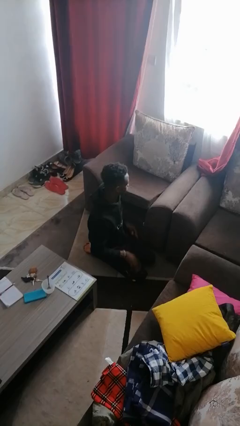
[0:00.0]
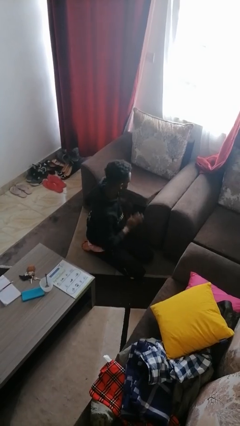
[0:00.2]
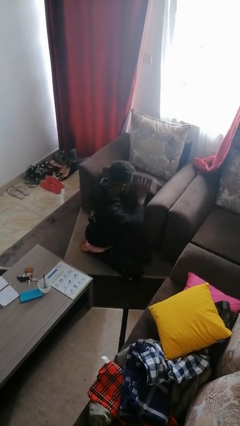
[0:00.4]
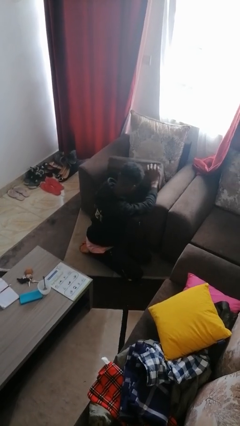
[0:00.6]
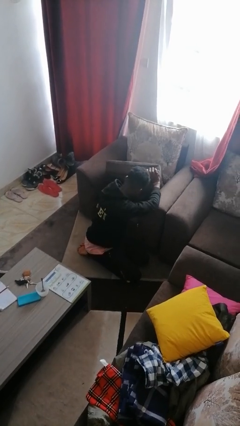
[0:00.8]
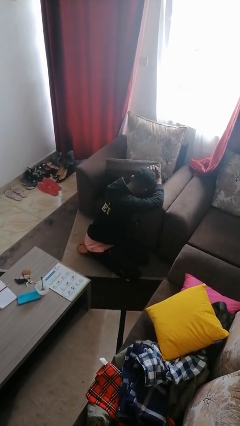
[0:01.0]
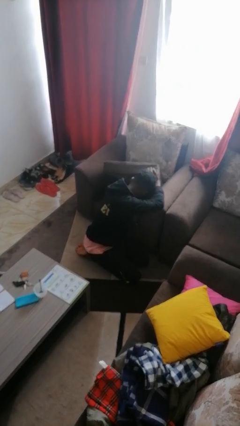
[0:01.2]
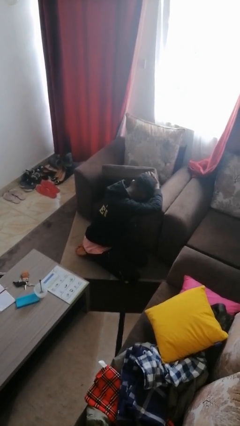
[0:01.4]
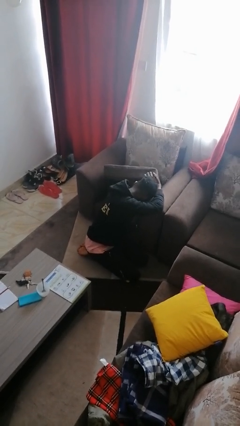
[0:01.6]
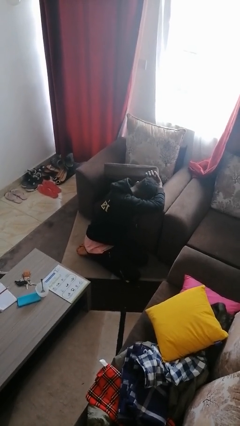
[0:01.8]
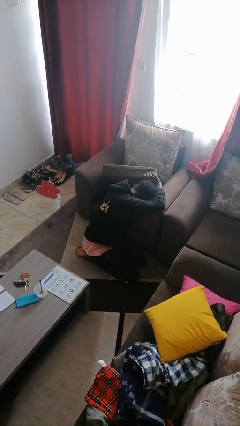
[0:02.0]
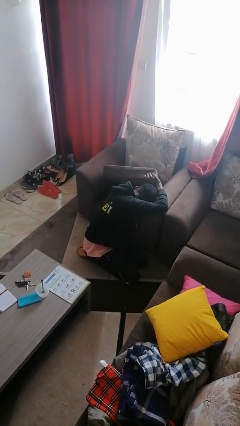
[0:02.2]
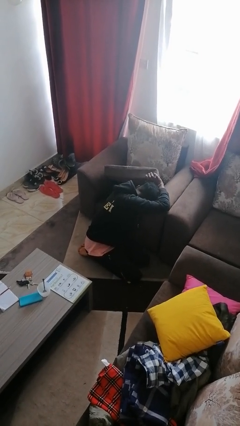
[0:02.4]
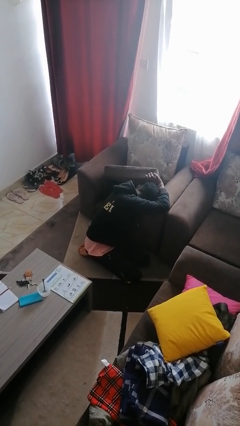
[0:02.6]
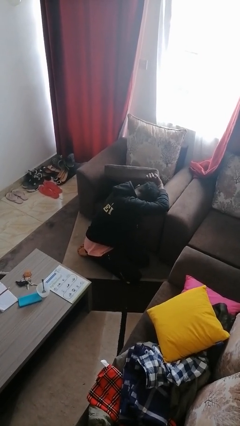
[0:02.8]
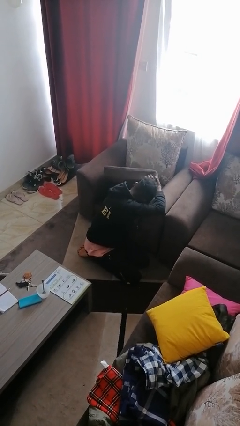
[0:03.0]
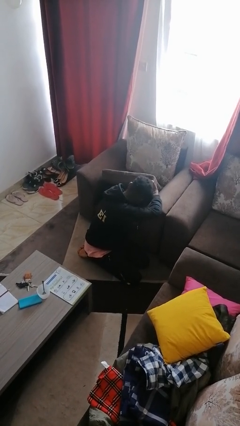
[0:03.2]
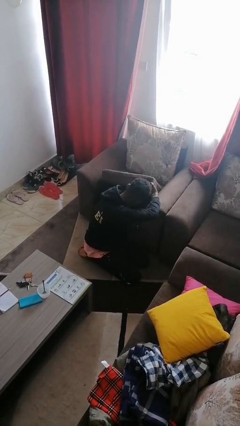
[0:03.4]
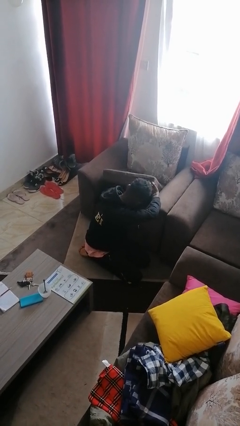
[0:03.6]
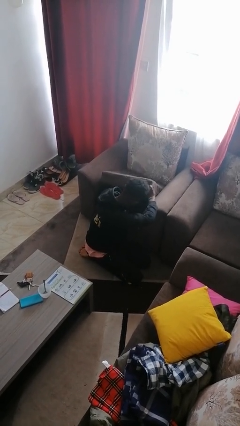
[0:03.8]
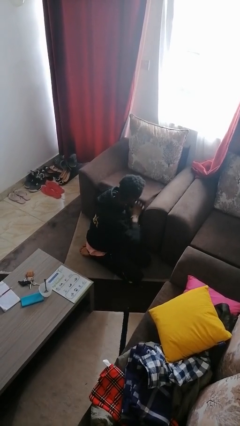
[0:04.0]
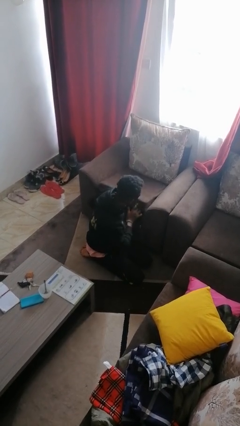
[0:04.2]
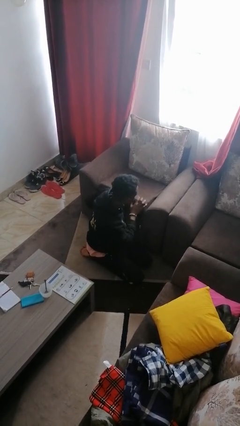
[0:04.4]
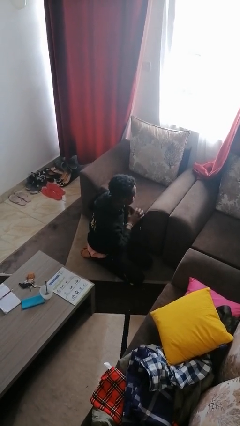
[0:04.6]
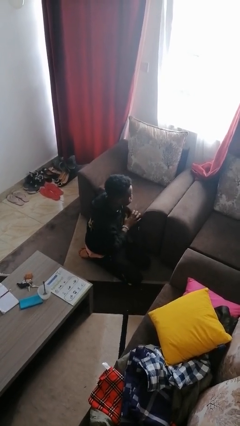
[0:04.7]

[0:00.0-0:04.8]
person searches in couch

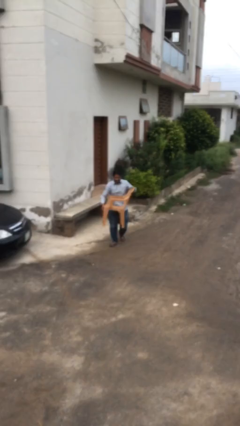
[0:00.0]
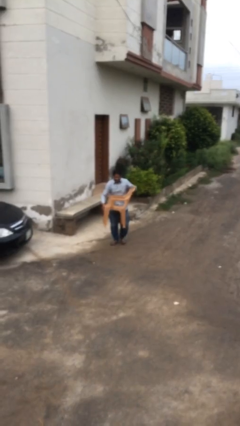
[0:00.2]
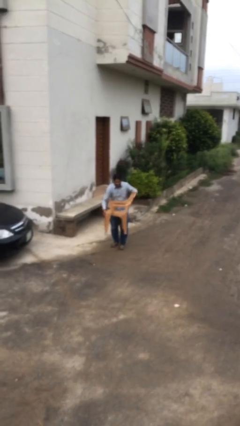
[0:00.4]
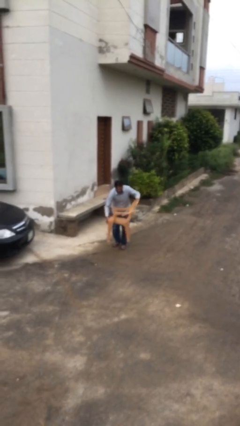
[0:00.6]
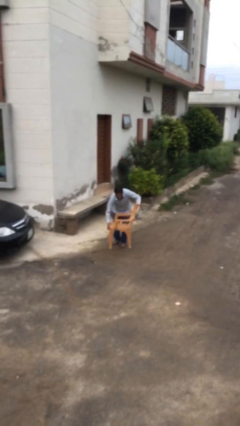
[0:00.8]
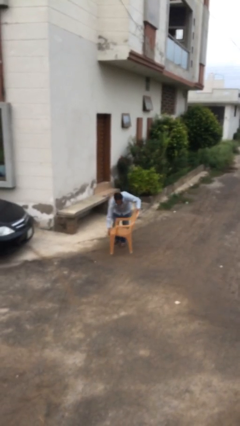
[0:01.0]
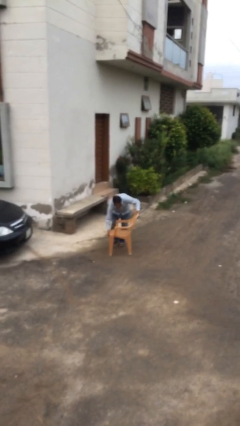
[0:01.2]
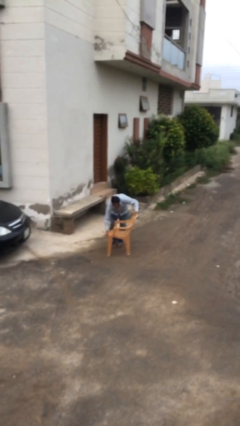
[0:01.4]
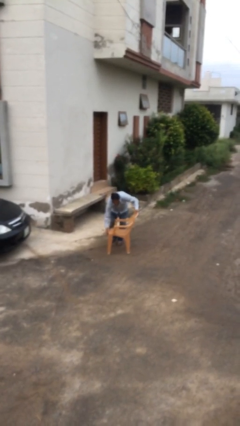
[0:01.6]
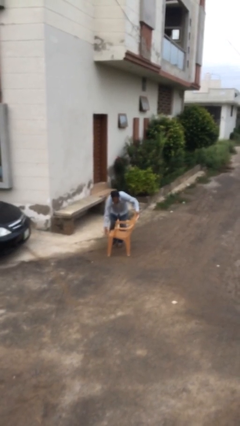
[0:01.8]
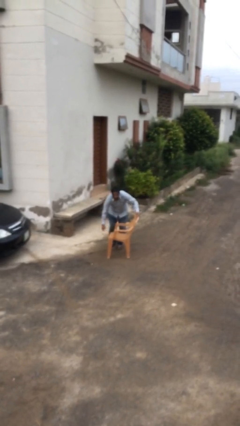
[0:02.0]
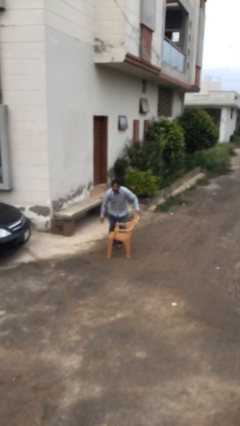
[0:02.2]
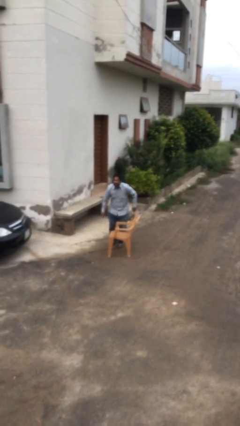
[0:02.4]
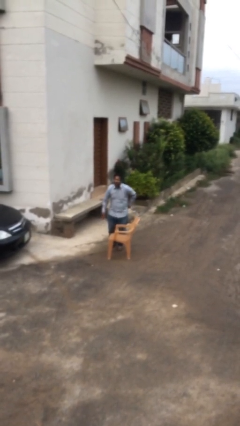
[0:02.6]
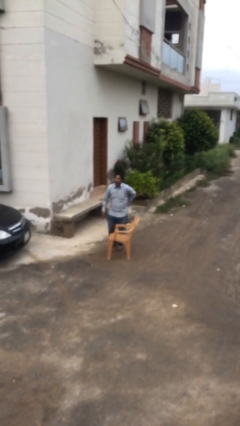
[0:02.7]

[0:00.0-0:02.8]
person puts down object on floor

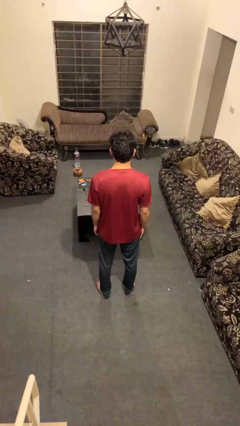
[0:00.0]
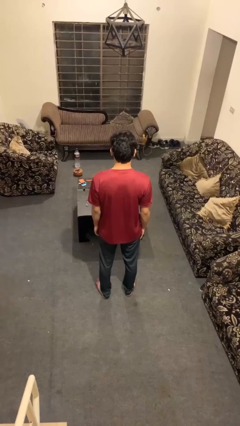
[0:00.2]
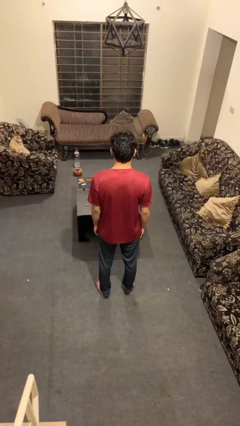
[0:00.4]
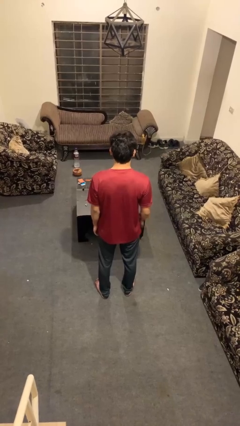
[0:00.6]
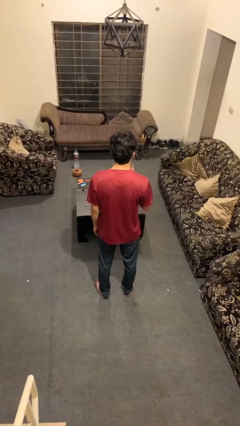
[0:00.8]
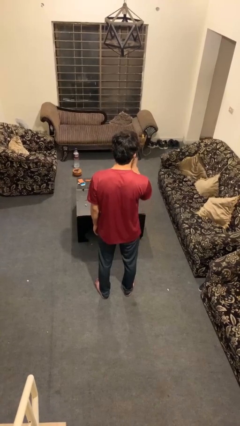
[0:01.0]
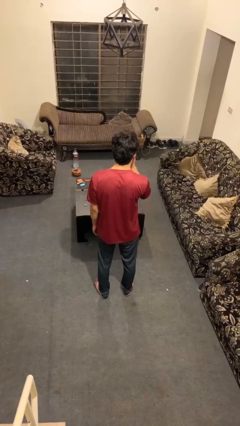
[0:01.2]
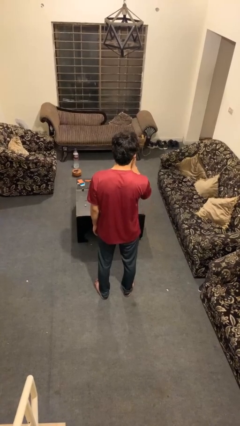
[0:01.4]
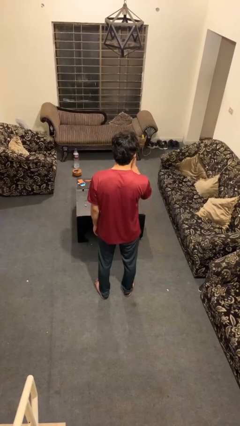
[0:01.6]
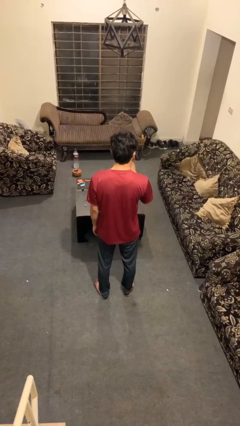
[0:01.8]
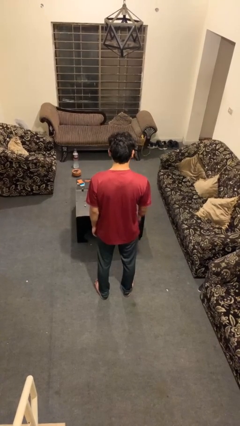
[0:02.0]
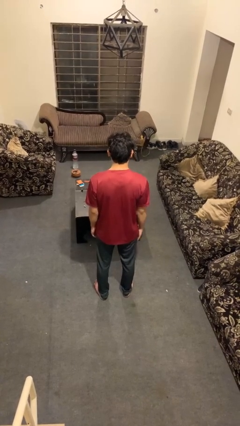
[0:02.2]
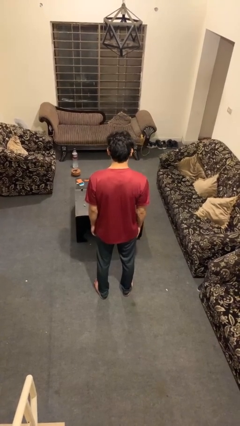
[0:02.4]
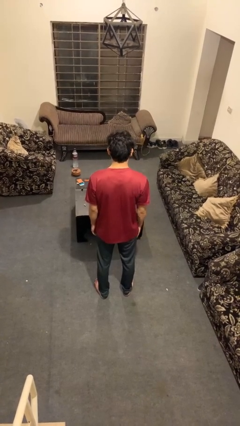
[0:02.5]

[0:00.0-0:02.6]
person gestures be quiet

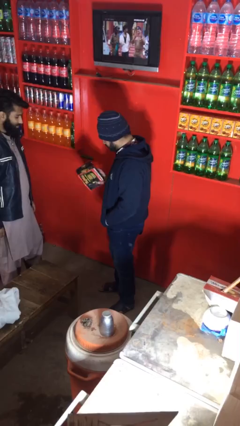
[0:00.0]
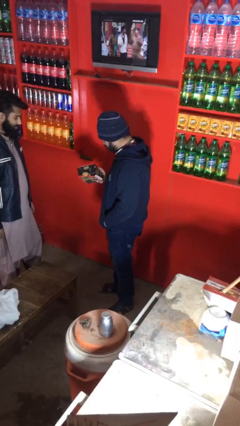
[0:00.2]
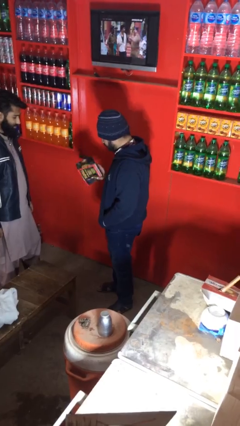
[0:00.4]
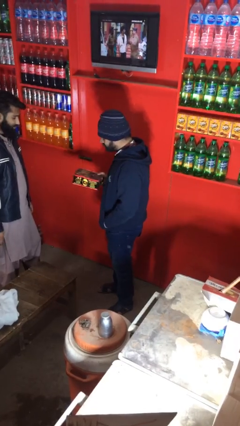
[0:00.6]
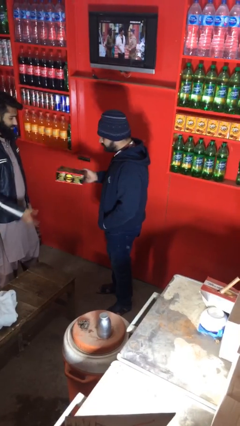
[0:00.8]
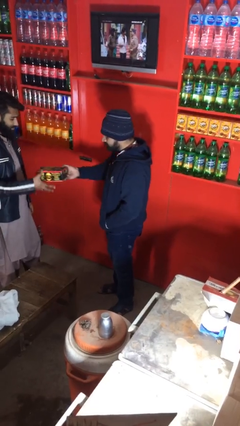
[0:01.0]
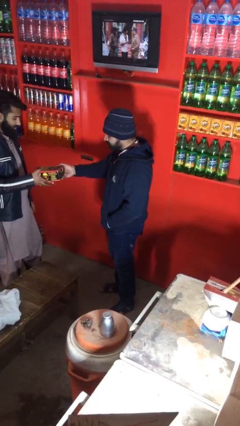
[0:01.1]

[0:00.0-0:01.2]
person transfers object to person

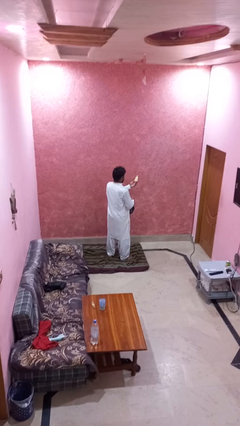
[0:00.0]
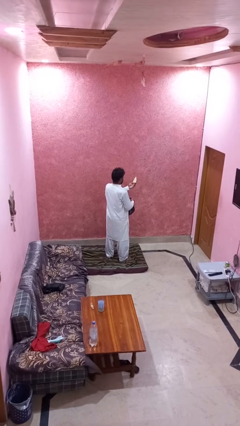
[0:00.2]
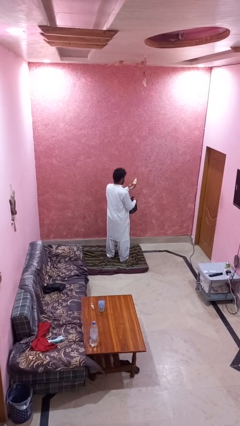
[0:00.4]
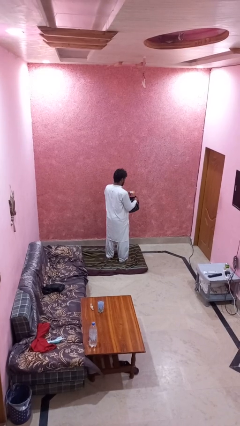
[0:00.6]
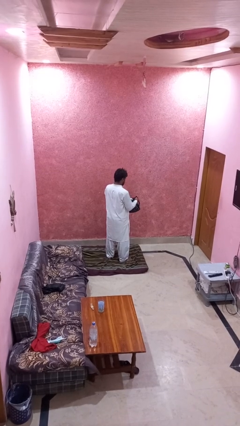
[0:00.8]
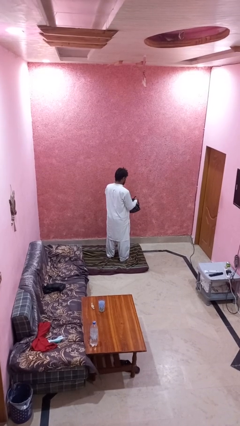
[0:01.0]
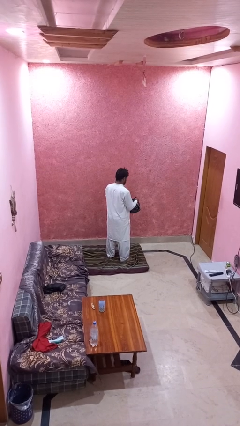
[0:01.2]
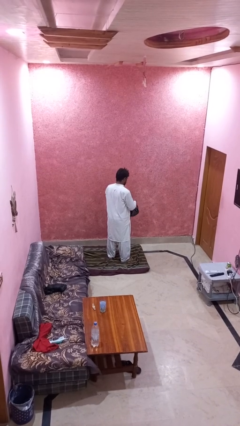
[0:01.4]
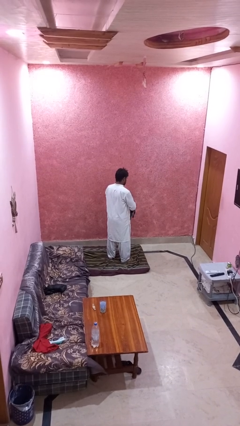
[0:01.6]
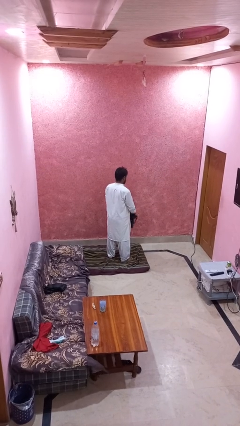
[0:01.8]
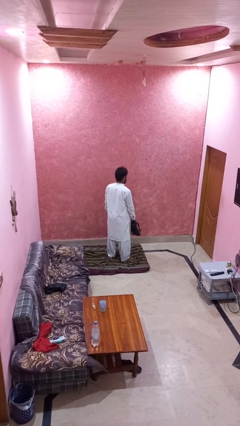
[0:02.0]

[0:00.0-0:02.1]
person puts object into purse

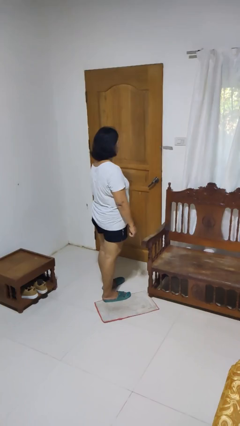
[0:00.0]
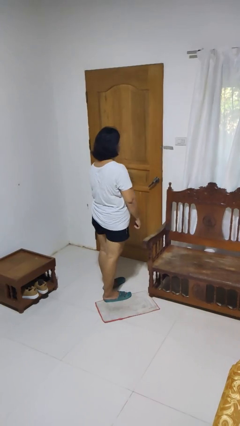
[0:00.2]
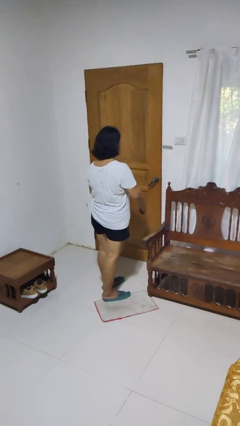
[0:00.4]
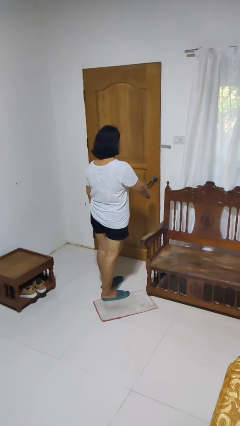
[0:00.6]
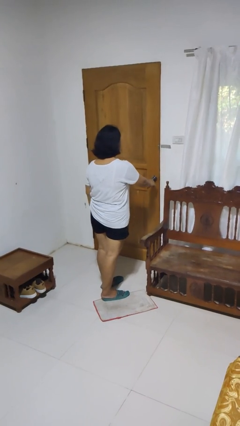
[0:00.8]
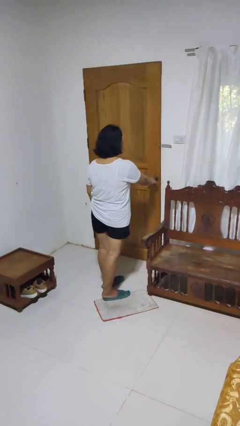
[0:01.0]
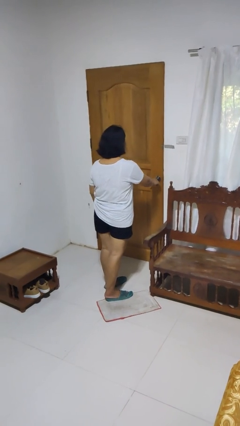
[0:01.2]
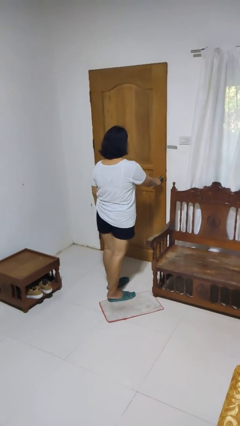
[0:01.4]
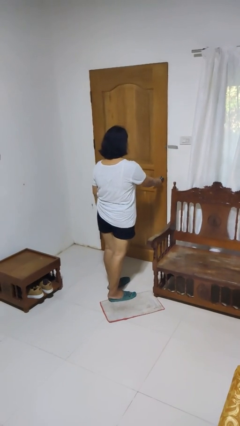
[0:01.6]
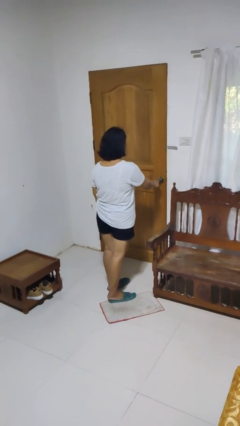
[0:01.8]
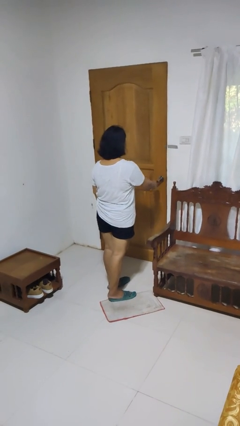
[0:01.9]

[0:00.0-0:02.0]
person locks door with keys

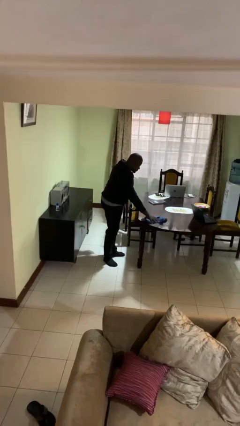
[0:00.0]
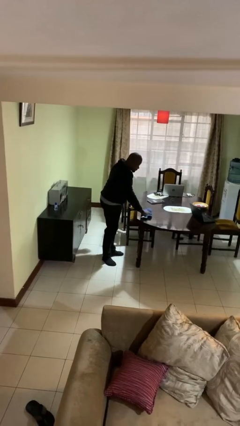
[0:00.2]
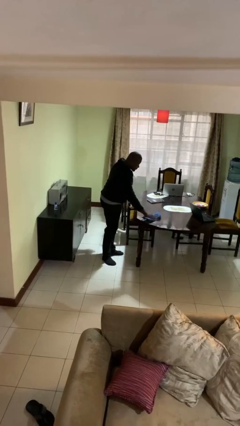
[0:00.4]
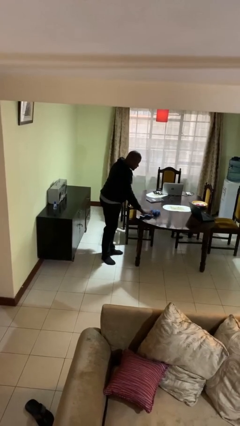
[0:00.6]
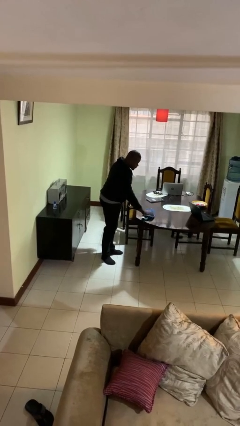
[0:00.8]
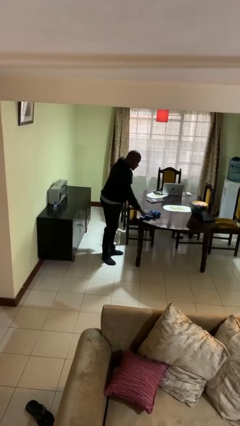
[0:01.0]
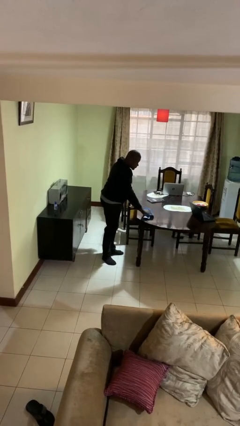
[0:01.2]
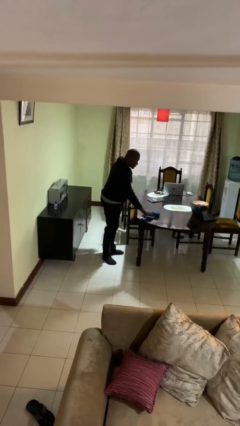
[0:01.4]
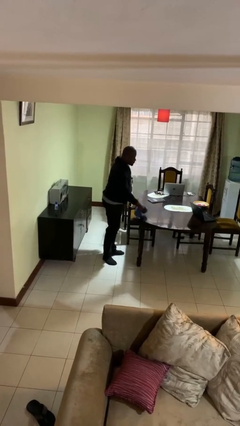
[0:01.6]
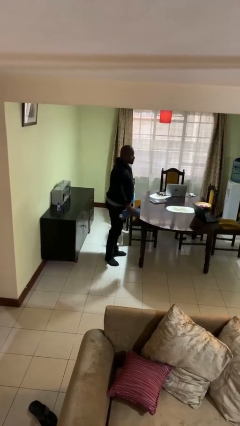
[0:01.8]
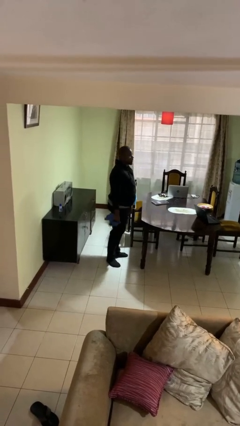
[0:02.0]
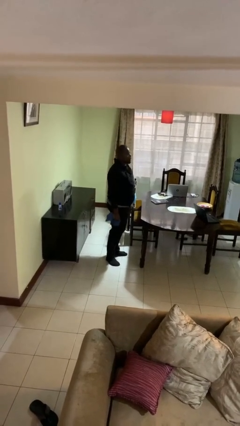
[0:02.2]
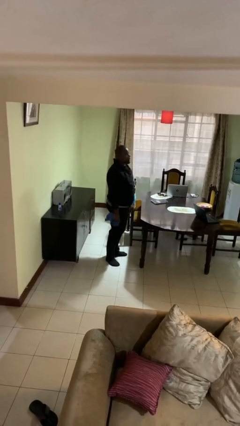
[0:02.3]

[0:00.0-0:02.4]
person cleans table with rag
